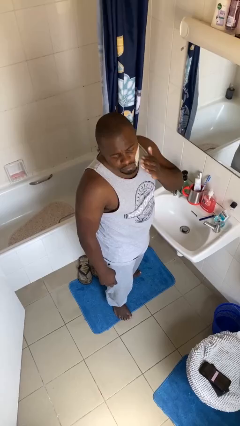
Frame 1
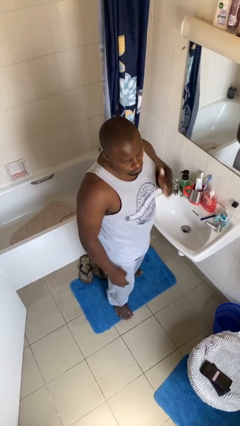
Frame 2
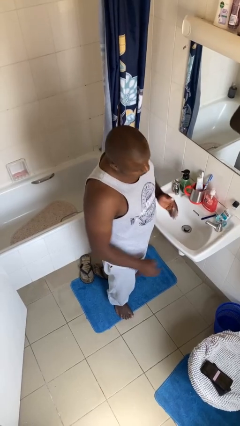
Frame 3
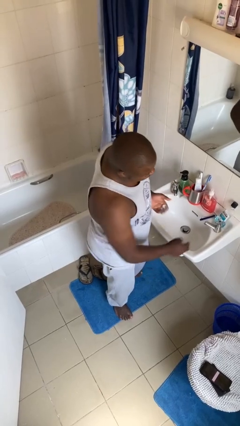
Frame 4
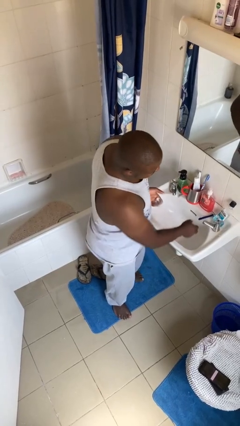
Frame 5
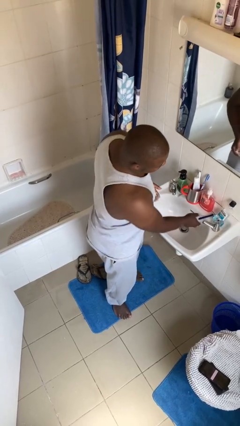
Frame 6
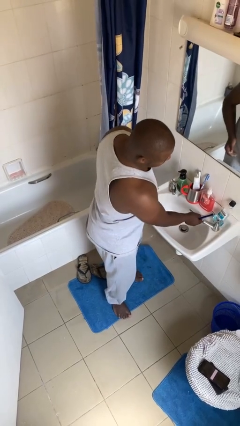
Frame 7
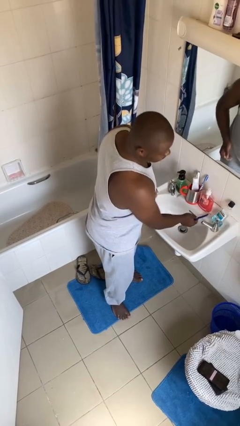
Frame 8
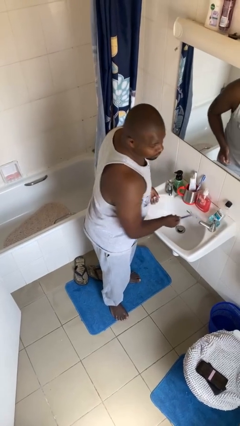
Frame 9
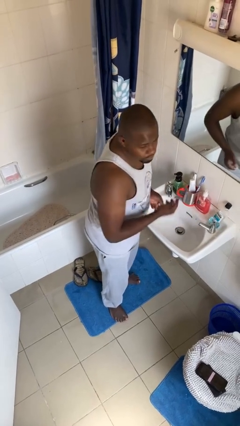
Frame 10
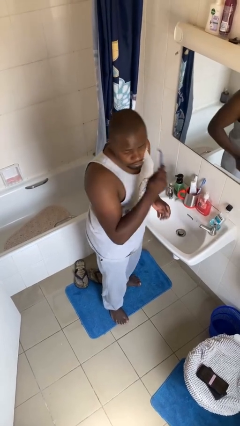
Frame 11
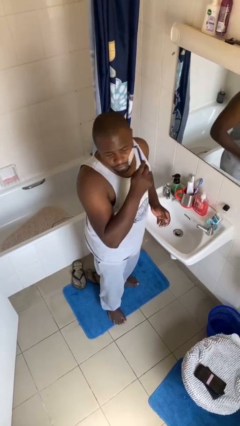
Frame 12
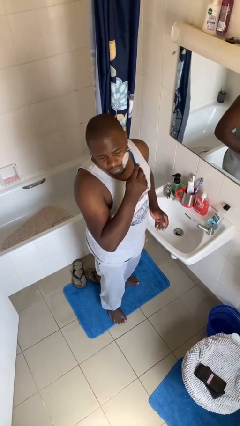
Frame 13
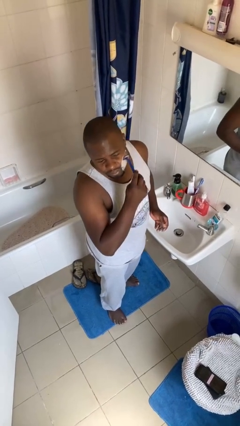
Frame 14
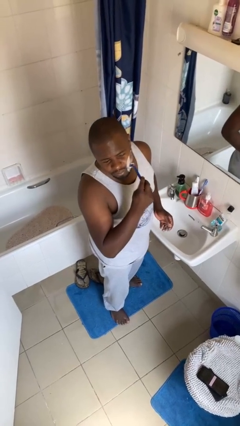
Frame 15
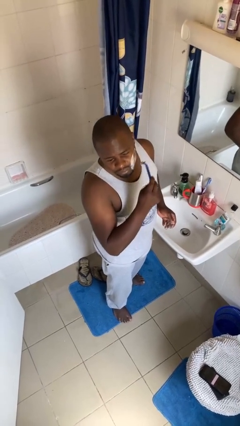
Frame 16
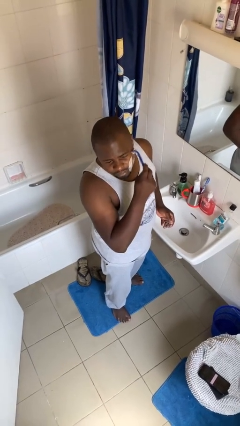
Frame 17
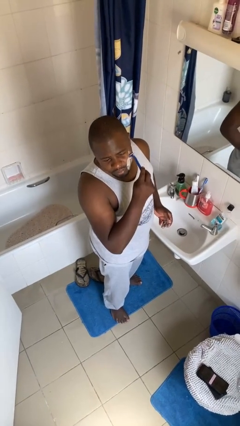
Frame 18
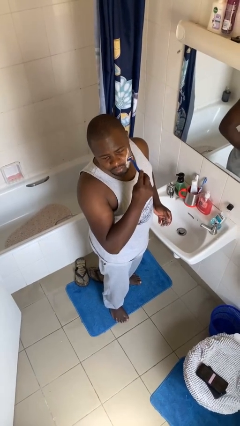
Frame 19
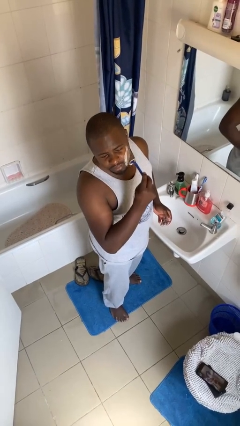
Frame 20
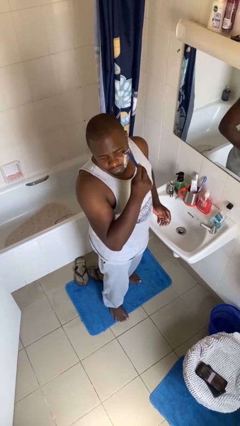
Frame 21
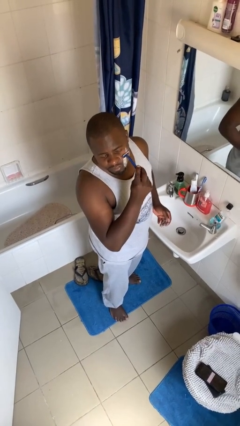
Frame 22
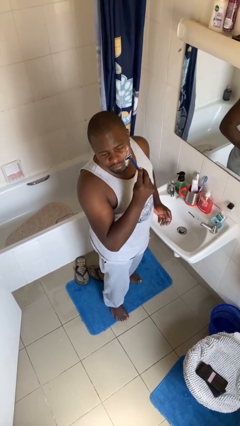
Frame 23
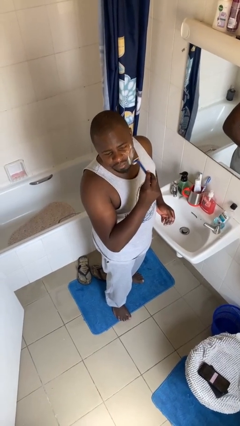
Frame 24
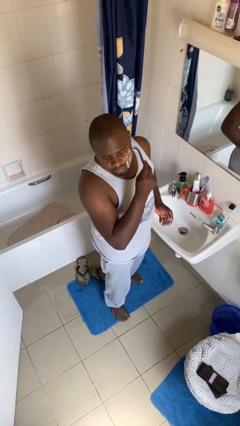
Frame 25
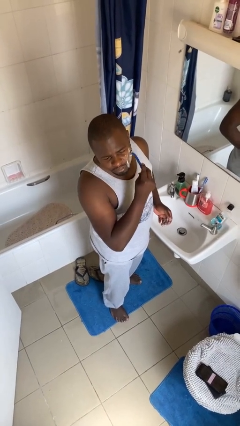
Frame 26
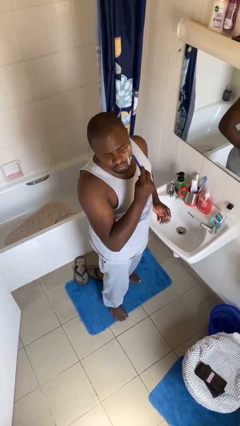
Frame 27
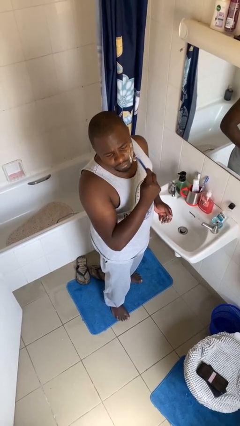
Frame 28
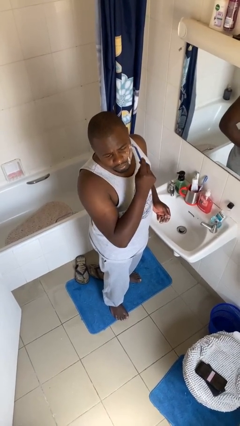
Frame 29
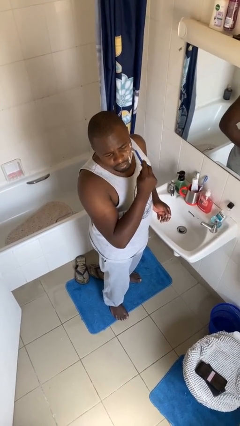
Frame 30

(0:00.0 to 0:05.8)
person shaves face

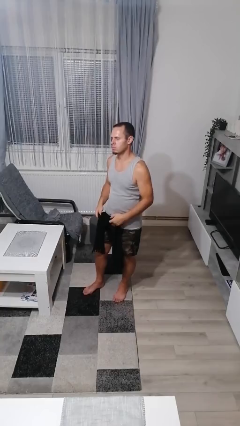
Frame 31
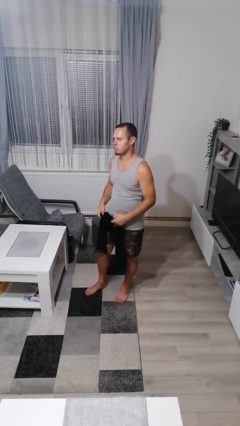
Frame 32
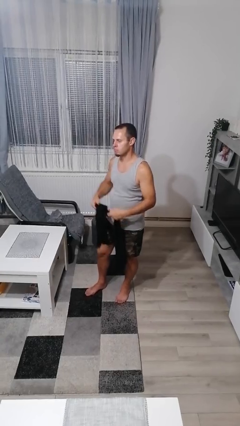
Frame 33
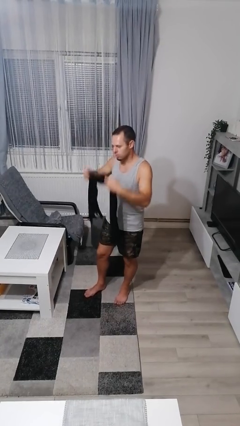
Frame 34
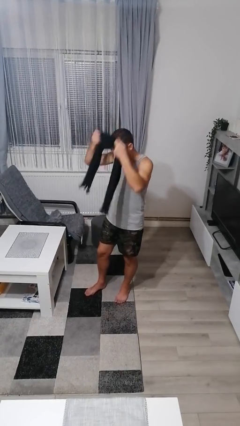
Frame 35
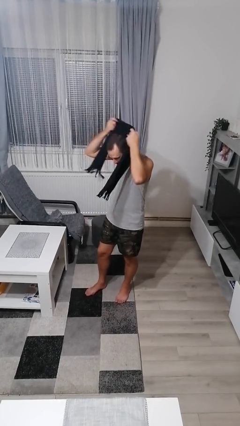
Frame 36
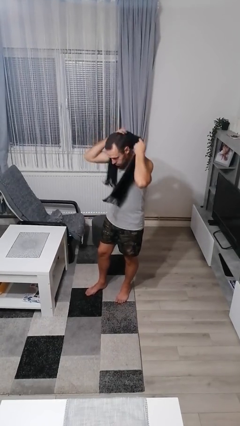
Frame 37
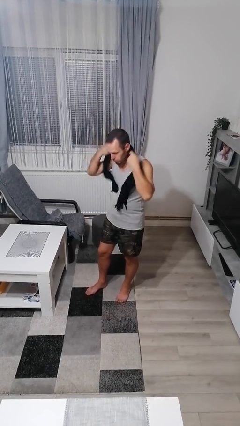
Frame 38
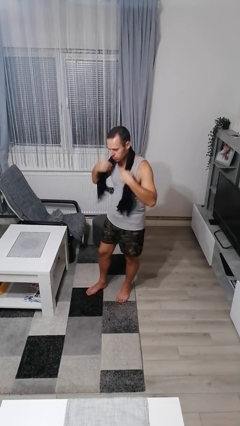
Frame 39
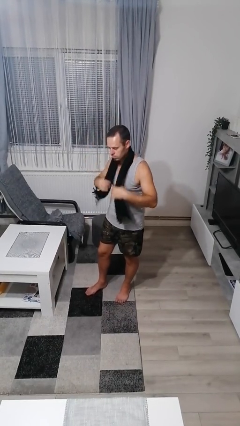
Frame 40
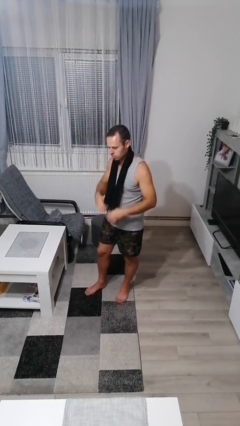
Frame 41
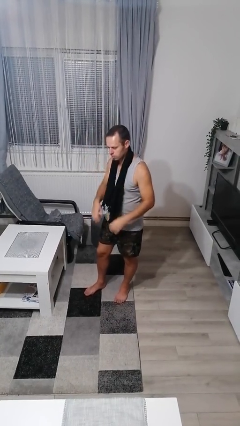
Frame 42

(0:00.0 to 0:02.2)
person puts on scarf

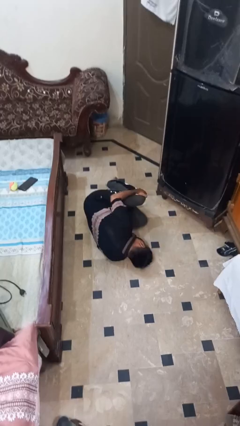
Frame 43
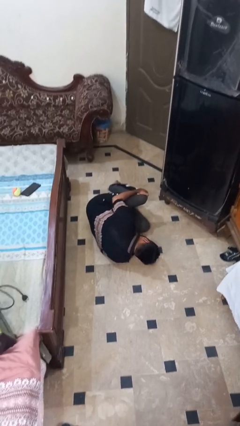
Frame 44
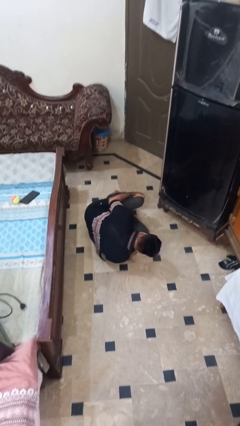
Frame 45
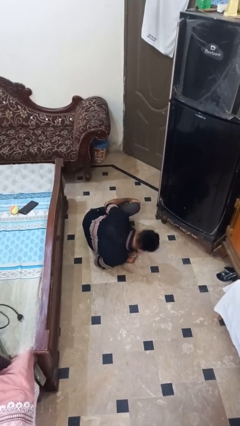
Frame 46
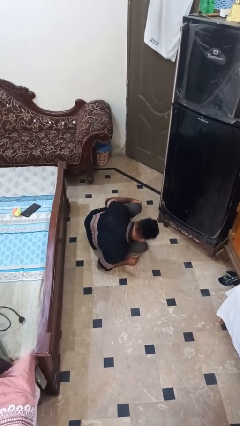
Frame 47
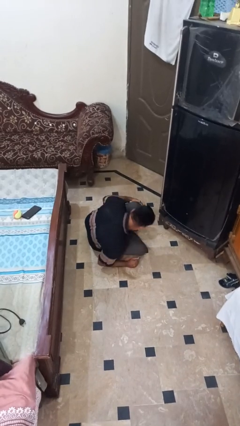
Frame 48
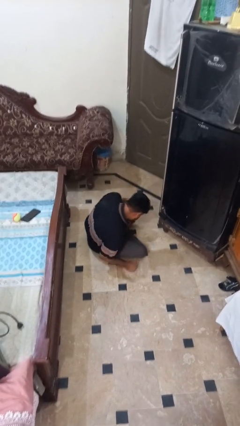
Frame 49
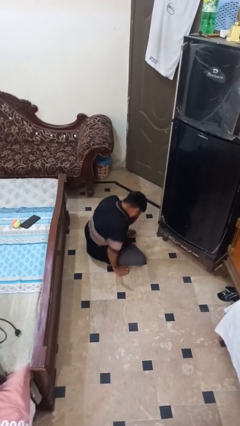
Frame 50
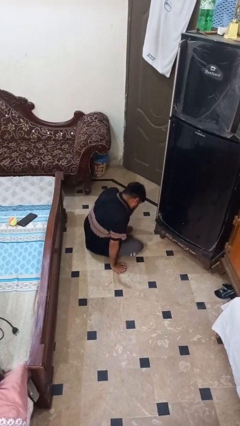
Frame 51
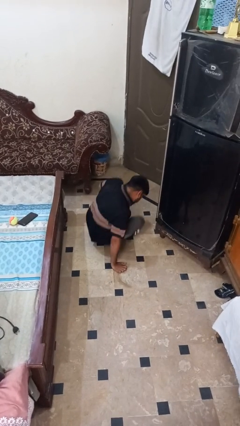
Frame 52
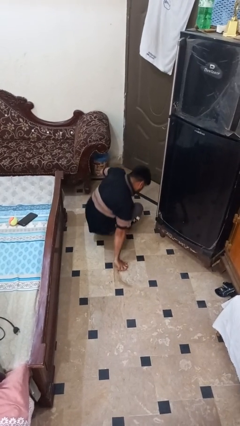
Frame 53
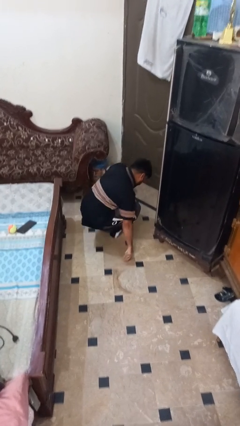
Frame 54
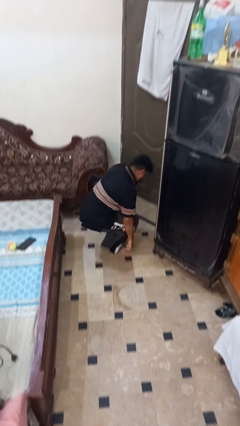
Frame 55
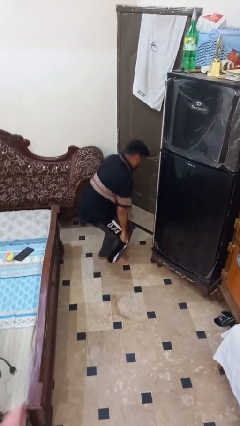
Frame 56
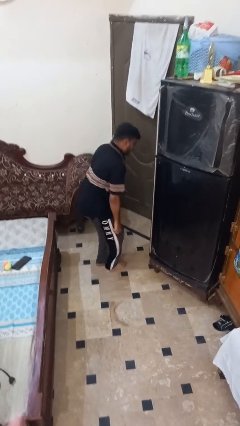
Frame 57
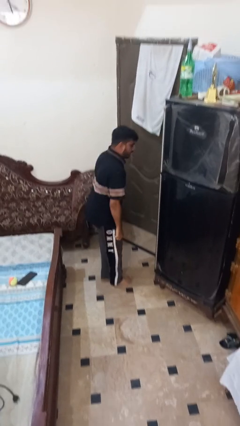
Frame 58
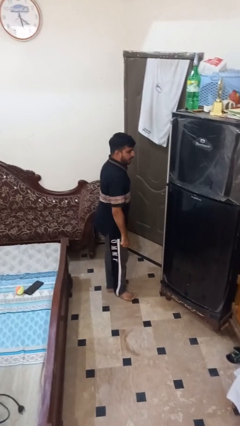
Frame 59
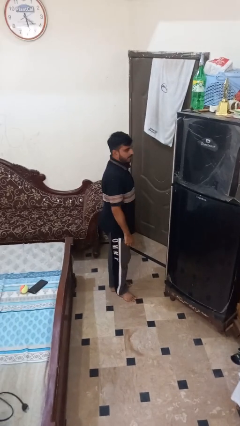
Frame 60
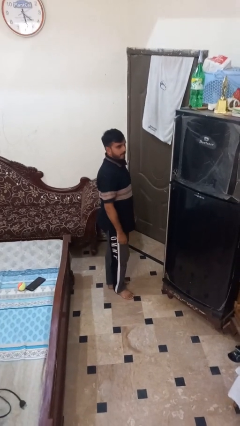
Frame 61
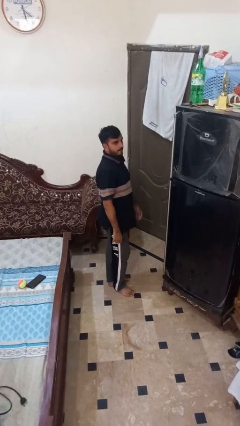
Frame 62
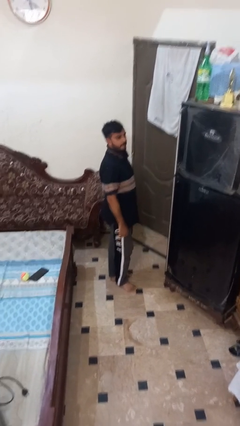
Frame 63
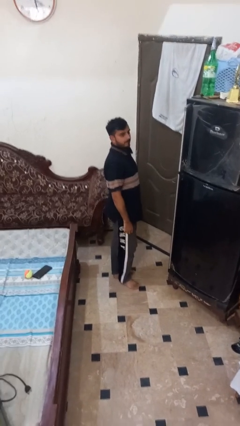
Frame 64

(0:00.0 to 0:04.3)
person stands up from floor

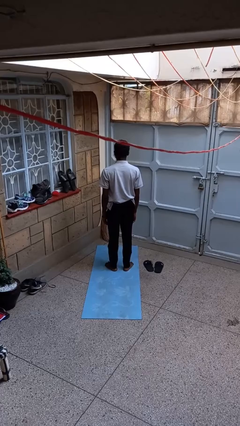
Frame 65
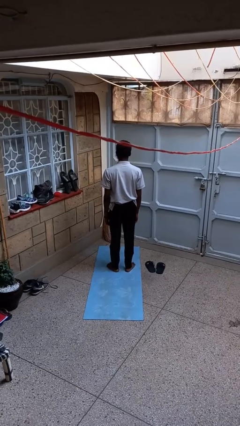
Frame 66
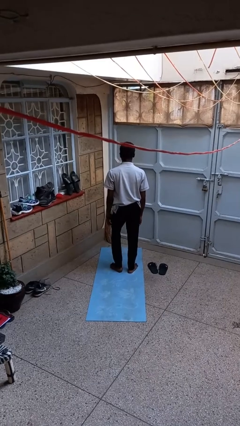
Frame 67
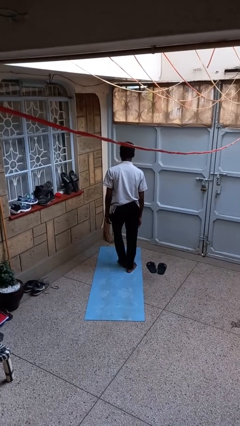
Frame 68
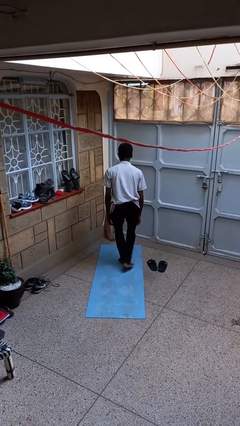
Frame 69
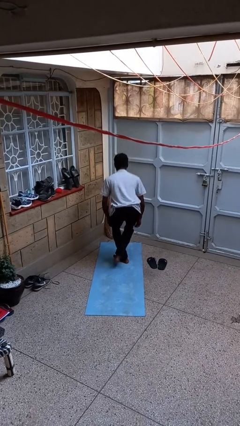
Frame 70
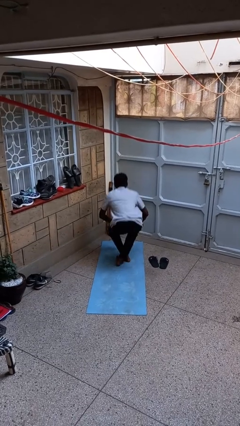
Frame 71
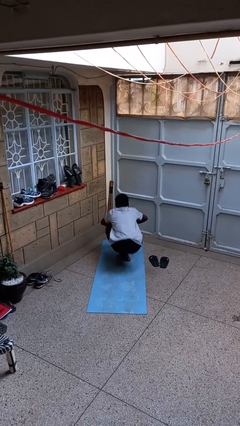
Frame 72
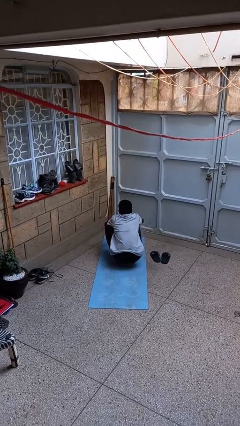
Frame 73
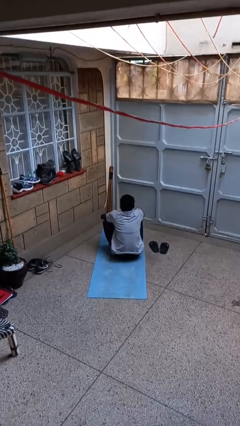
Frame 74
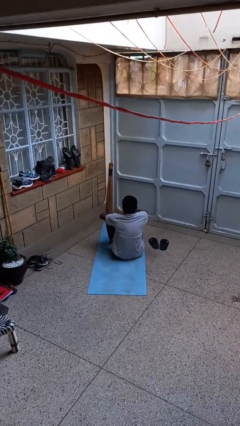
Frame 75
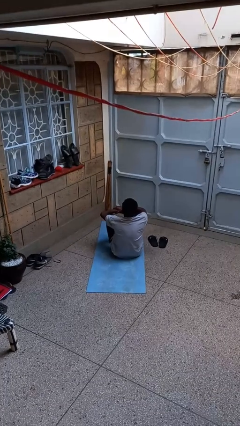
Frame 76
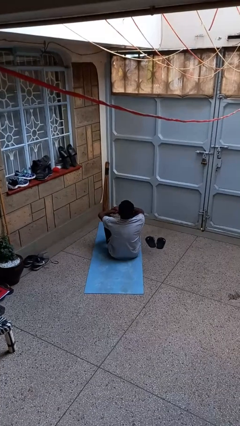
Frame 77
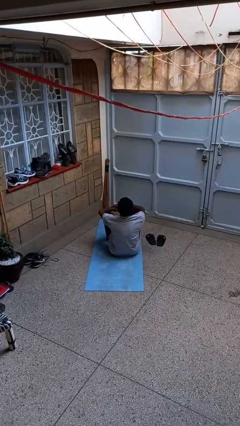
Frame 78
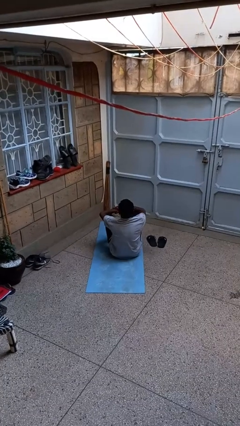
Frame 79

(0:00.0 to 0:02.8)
person sits crisscross

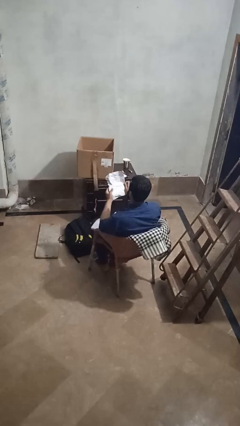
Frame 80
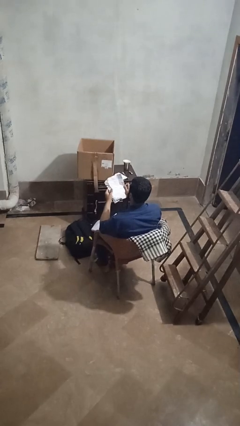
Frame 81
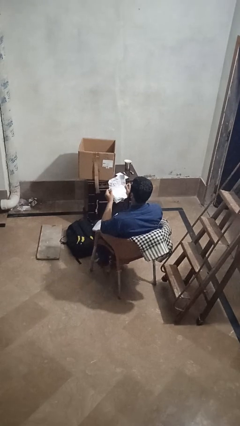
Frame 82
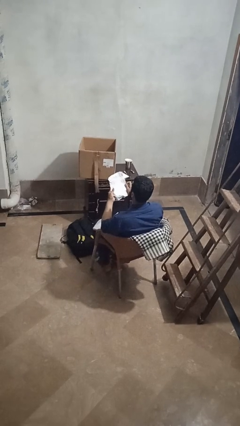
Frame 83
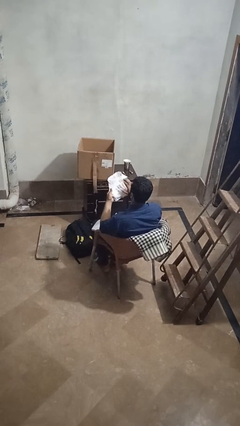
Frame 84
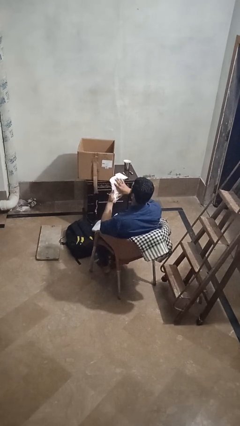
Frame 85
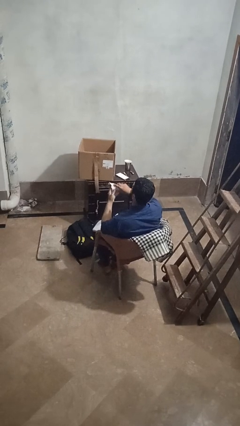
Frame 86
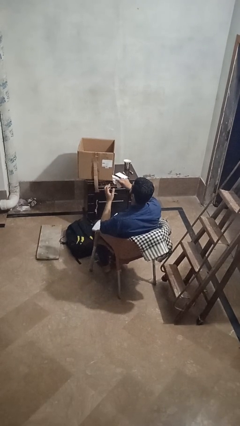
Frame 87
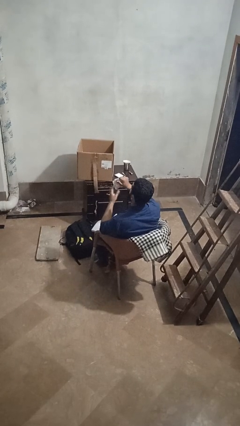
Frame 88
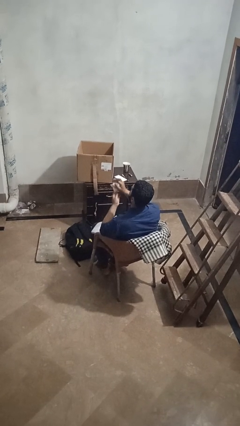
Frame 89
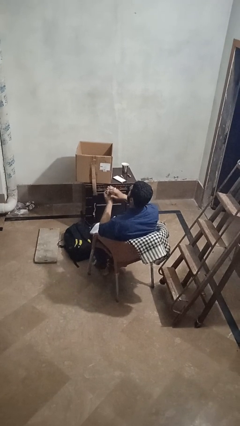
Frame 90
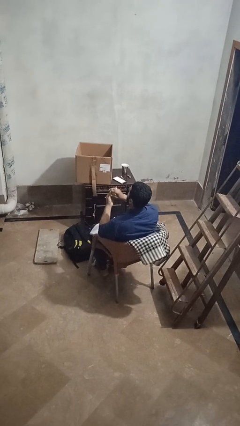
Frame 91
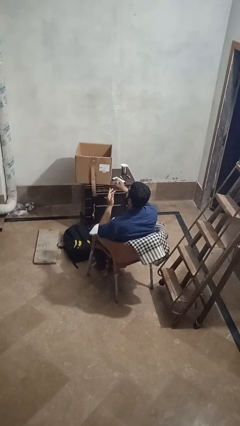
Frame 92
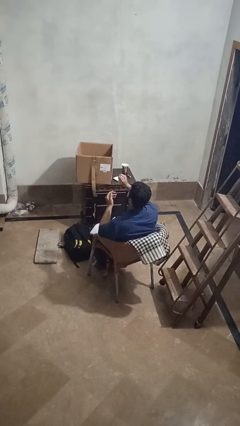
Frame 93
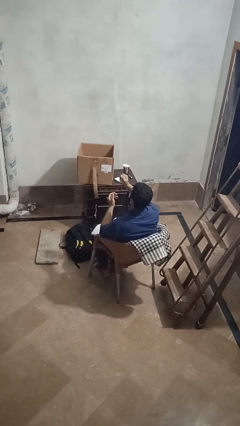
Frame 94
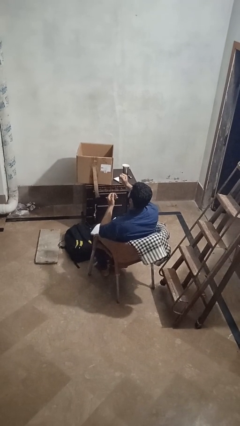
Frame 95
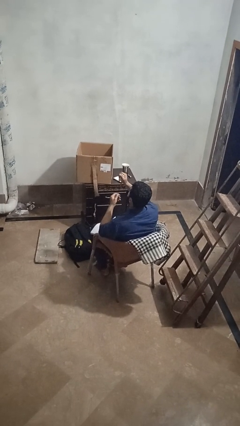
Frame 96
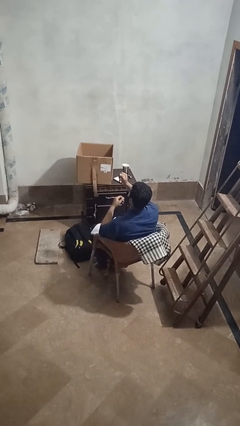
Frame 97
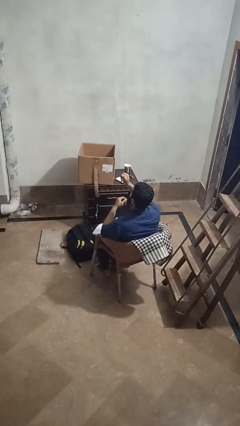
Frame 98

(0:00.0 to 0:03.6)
person crumples paper
